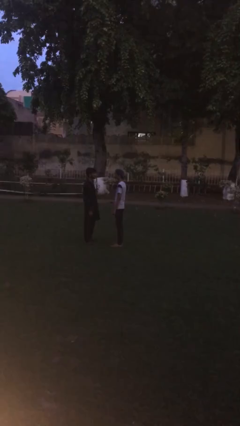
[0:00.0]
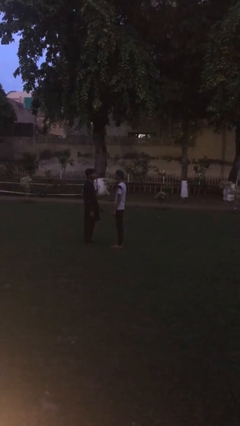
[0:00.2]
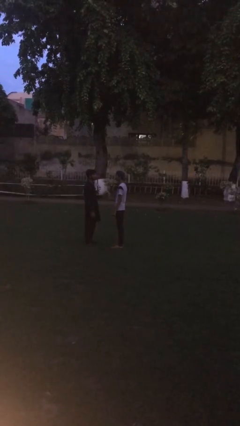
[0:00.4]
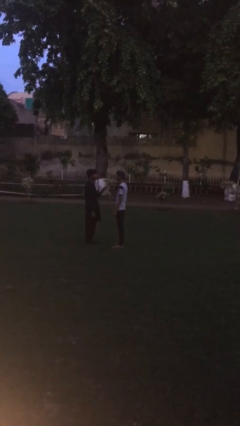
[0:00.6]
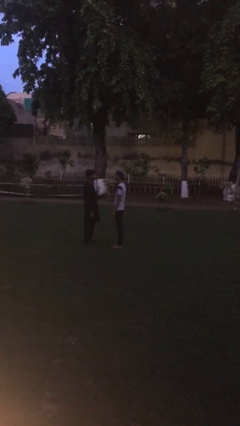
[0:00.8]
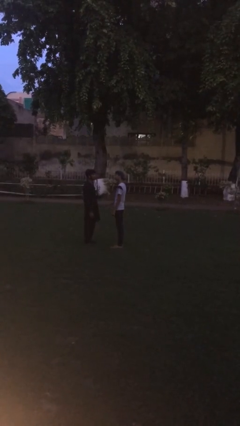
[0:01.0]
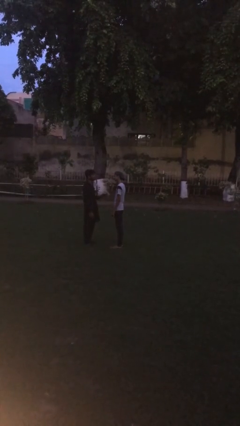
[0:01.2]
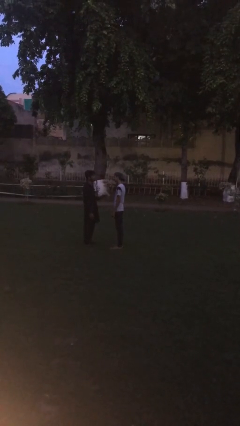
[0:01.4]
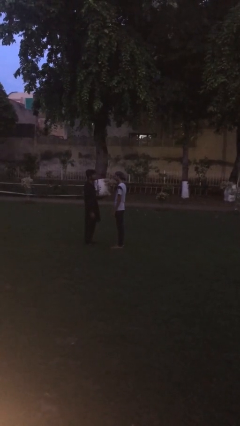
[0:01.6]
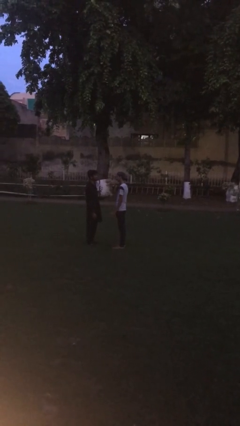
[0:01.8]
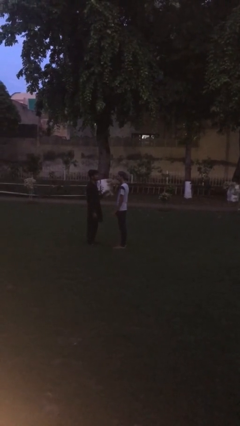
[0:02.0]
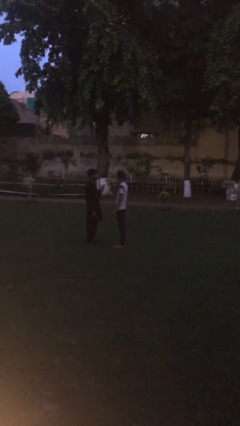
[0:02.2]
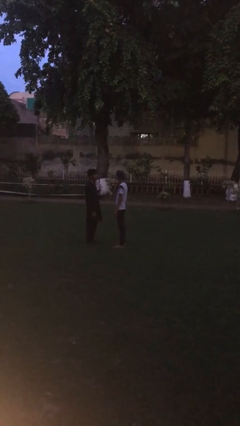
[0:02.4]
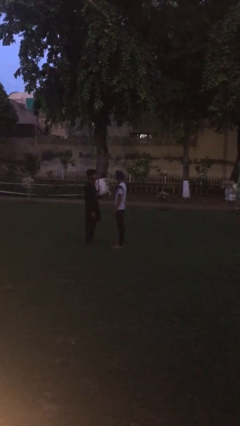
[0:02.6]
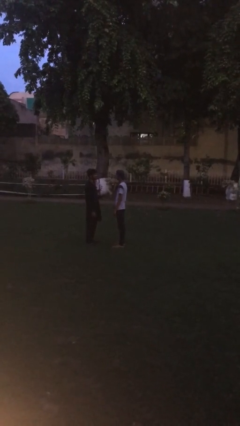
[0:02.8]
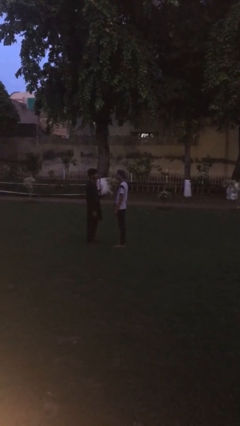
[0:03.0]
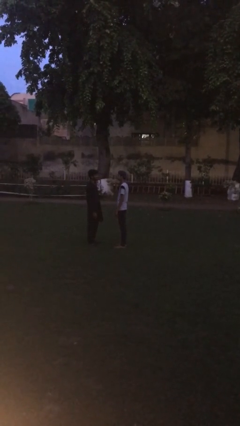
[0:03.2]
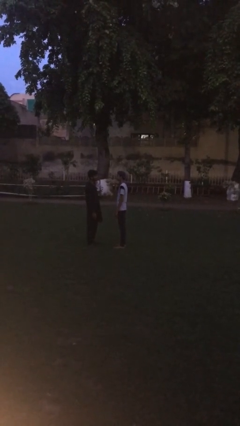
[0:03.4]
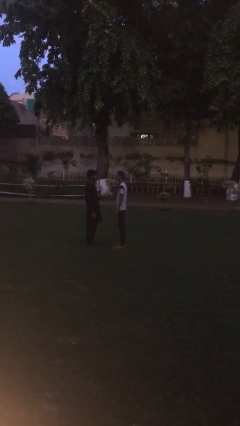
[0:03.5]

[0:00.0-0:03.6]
person talks to person

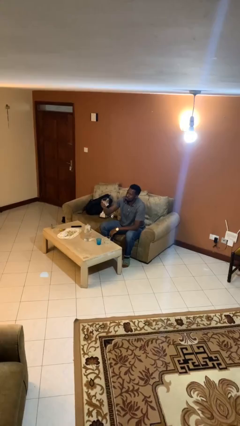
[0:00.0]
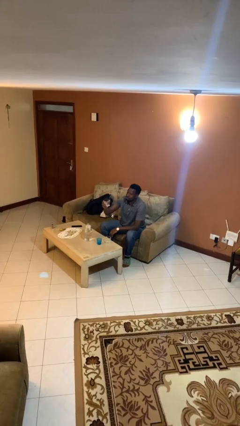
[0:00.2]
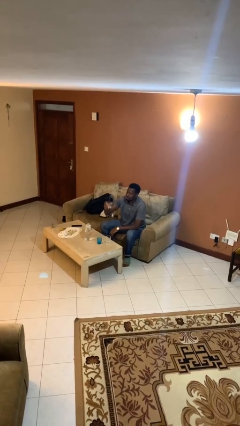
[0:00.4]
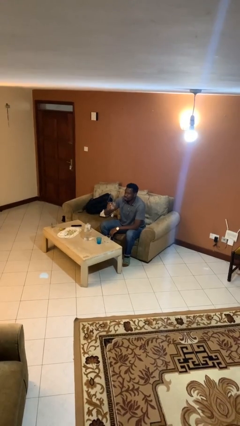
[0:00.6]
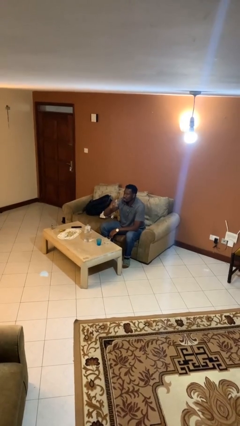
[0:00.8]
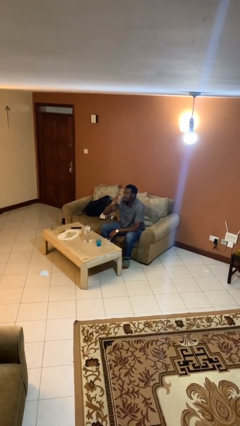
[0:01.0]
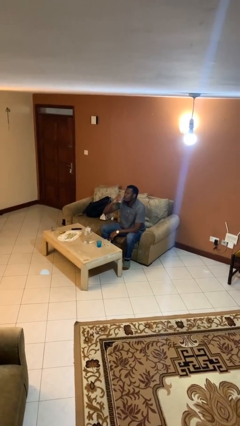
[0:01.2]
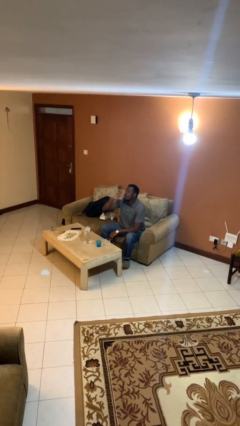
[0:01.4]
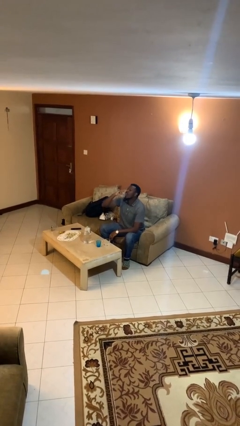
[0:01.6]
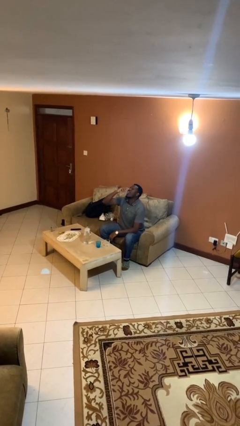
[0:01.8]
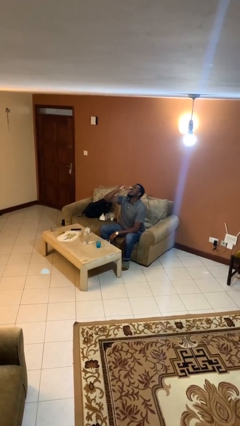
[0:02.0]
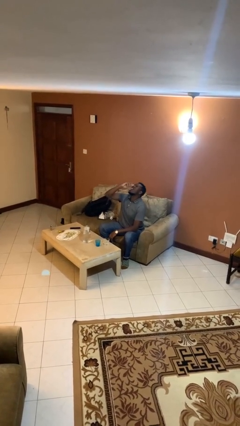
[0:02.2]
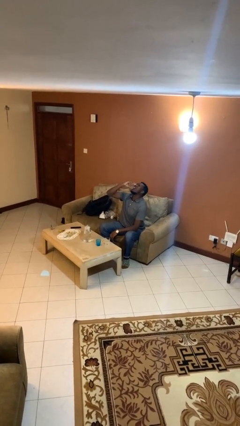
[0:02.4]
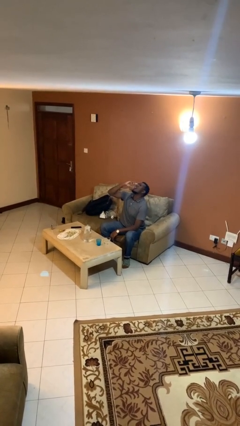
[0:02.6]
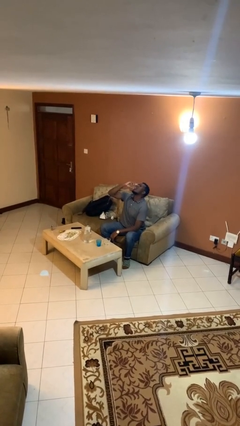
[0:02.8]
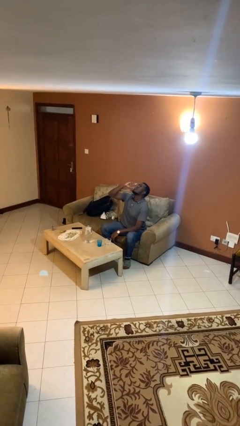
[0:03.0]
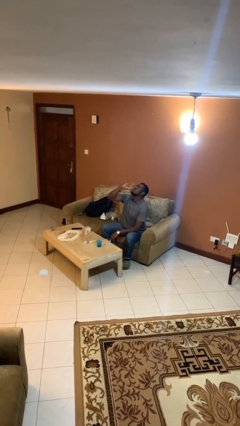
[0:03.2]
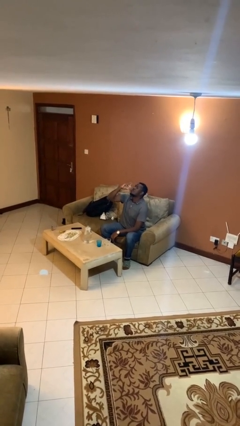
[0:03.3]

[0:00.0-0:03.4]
person drinks from shotglass

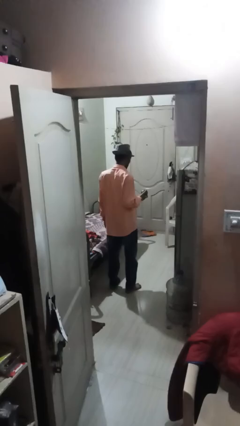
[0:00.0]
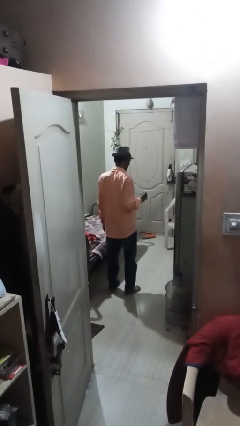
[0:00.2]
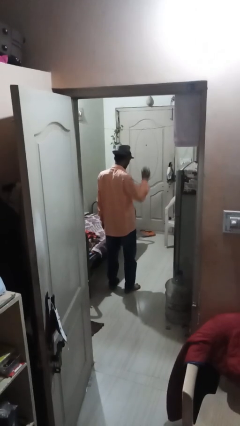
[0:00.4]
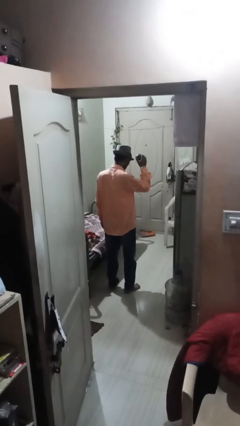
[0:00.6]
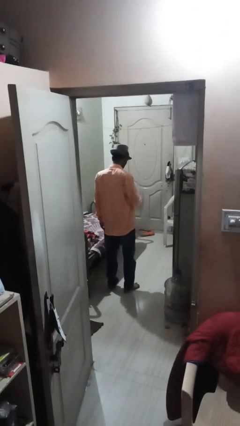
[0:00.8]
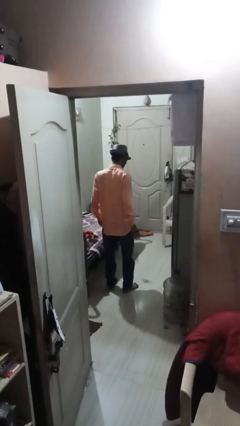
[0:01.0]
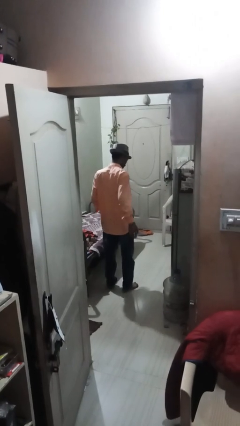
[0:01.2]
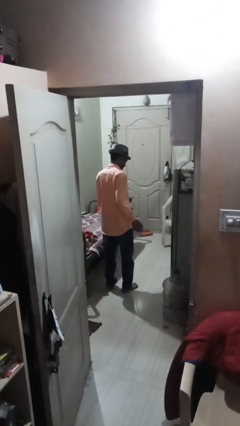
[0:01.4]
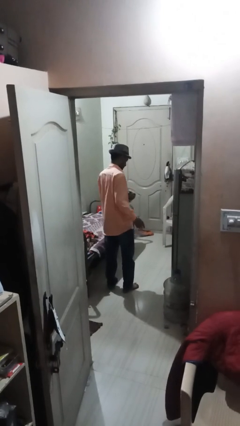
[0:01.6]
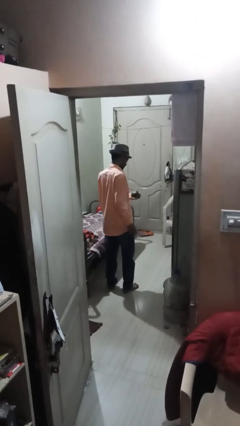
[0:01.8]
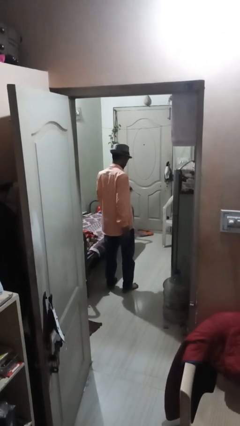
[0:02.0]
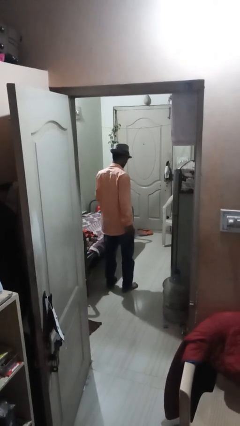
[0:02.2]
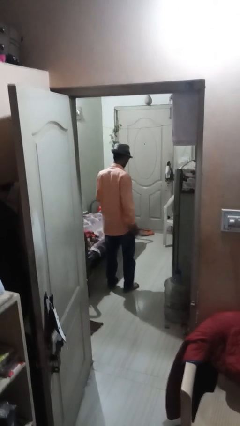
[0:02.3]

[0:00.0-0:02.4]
person bounces ball on floor

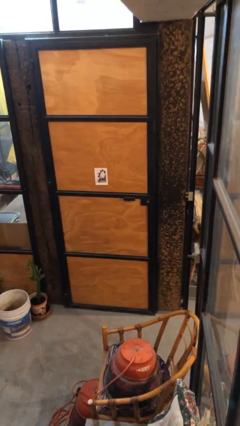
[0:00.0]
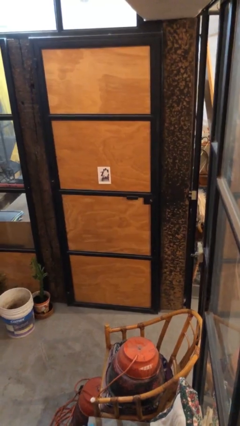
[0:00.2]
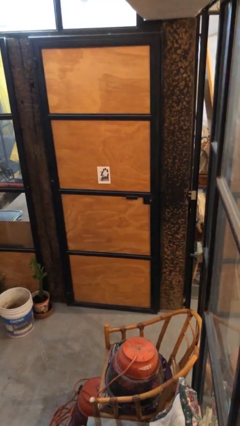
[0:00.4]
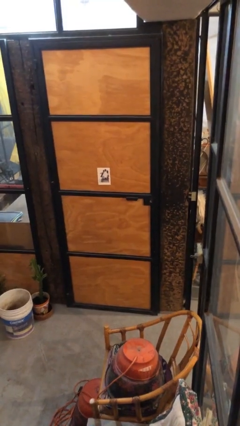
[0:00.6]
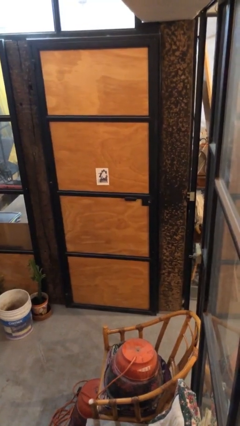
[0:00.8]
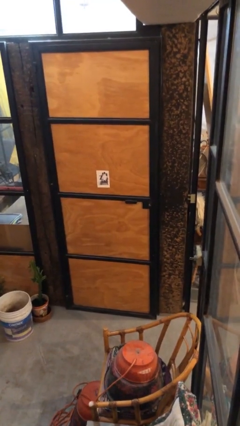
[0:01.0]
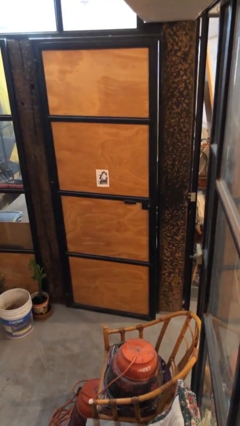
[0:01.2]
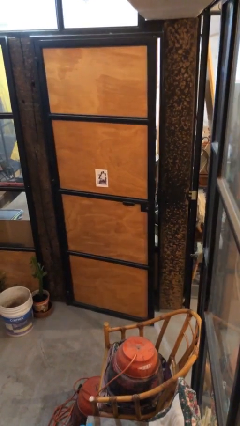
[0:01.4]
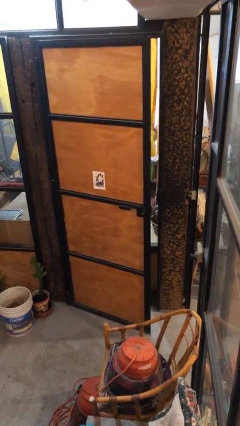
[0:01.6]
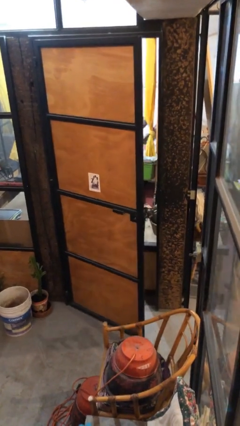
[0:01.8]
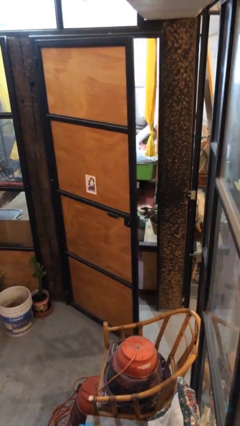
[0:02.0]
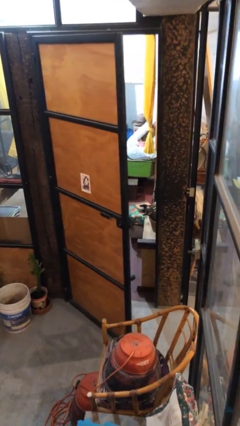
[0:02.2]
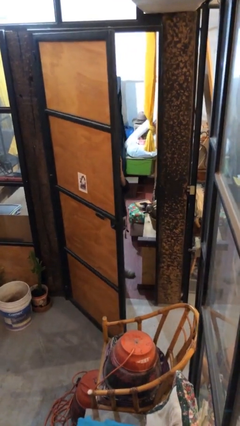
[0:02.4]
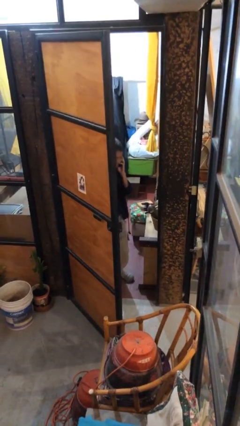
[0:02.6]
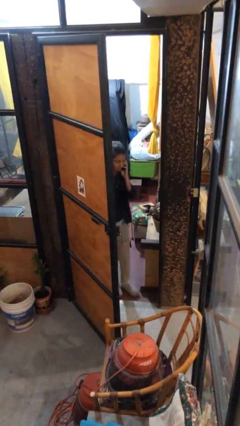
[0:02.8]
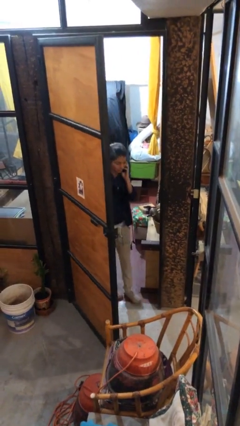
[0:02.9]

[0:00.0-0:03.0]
person opens facility door

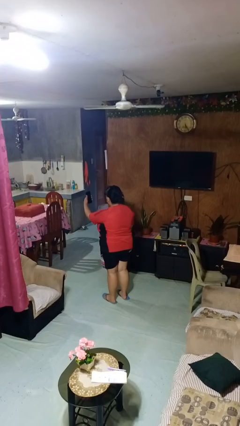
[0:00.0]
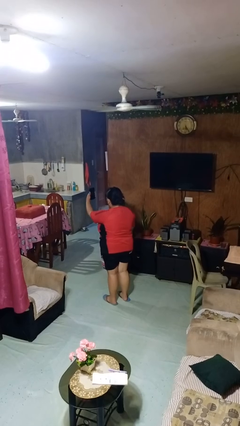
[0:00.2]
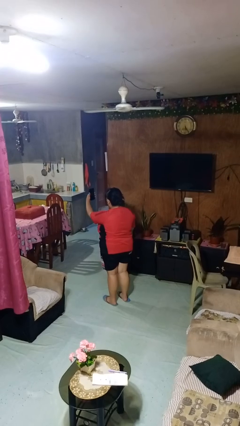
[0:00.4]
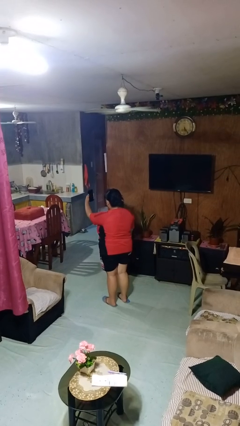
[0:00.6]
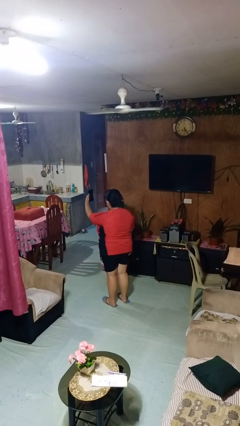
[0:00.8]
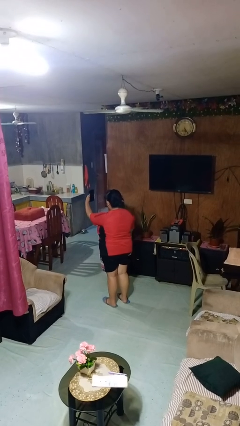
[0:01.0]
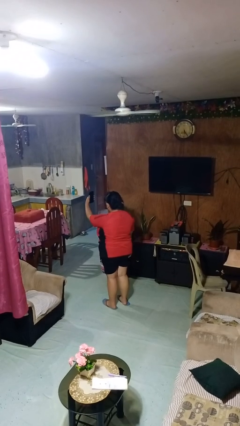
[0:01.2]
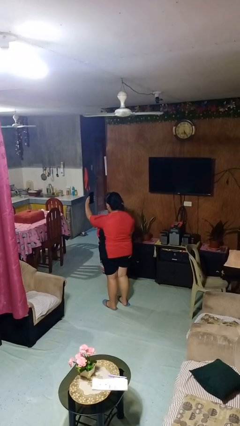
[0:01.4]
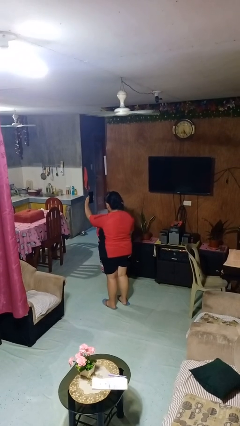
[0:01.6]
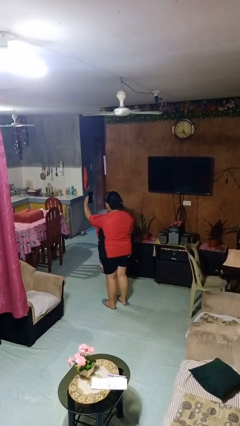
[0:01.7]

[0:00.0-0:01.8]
person takes selfie

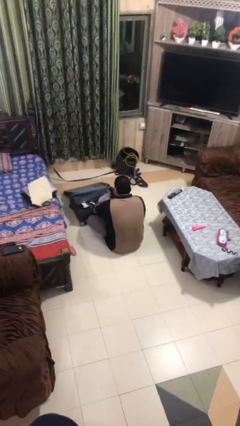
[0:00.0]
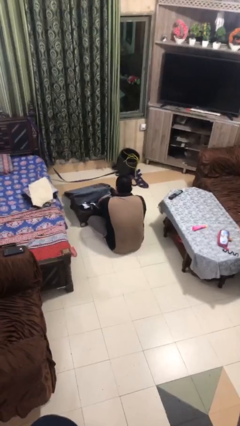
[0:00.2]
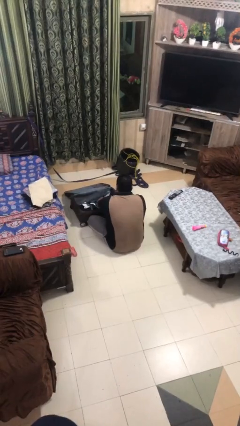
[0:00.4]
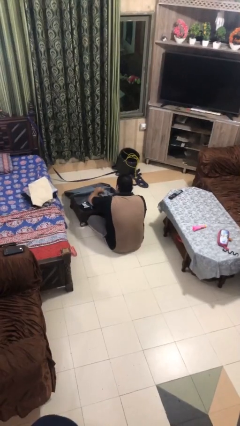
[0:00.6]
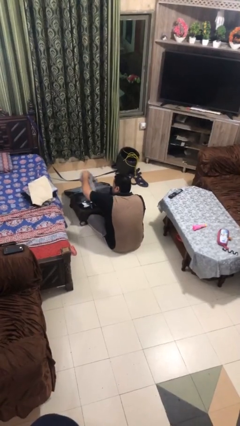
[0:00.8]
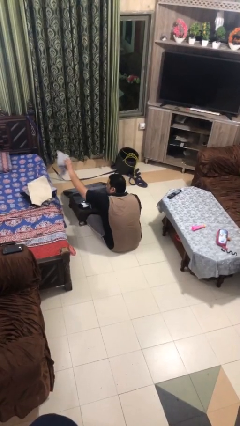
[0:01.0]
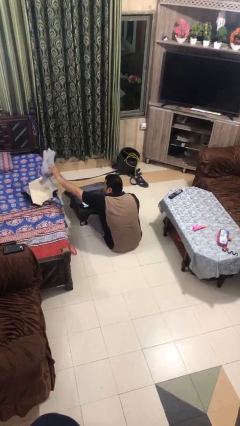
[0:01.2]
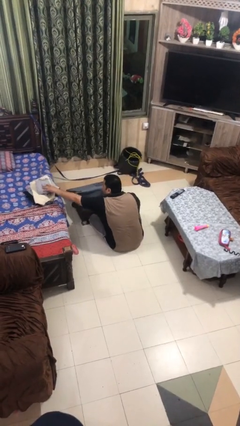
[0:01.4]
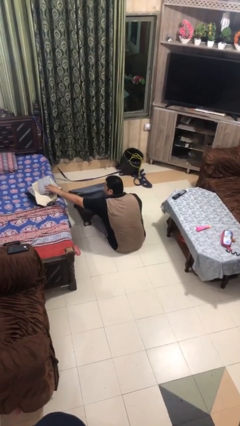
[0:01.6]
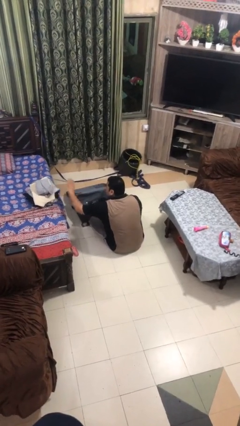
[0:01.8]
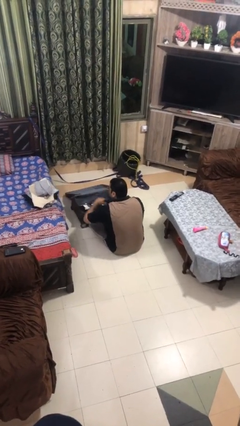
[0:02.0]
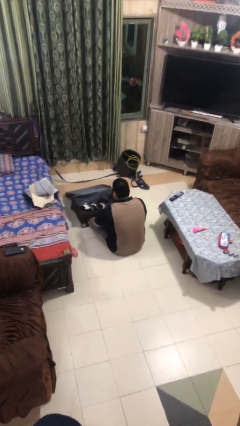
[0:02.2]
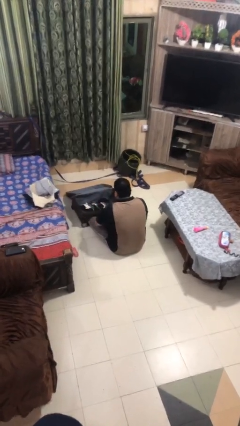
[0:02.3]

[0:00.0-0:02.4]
person unloads clothes from suitcase

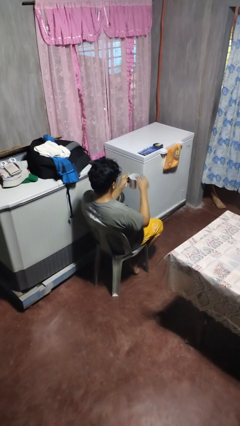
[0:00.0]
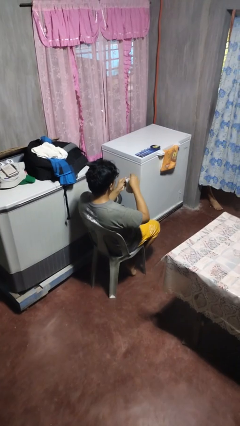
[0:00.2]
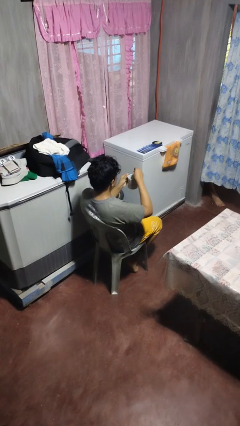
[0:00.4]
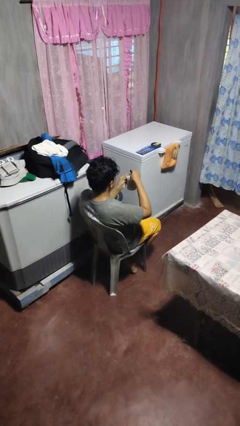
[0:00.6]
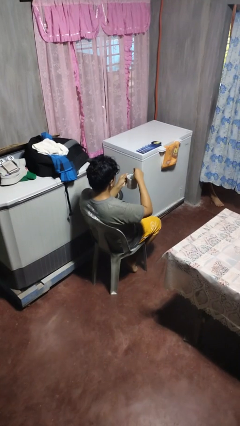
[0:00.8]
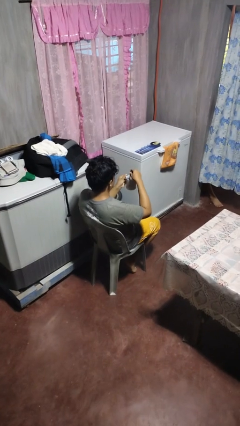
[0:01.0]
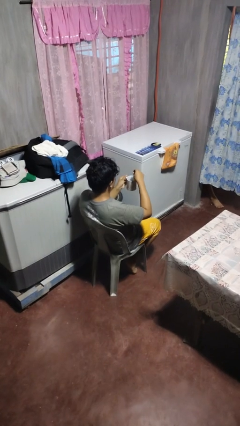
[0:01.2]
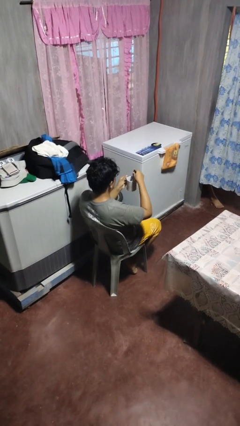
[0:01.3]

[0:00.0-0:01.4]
person stirs mug
